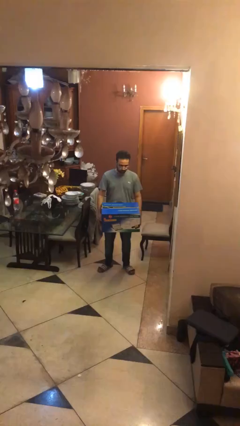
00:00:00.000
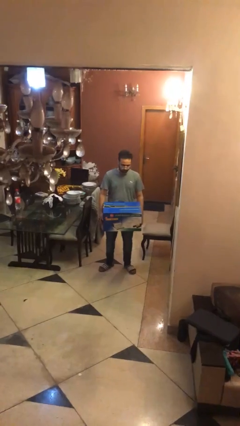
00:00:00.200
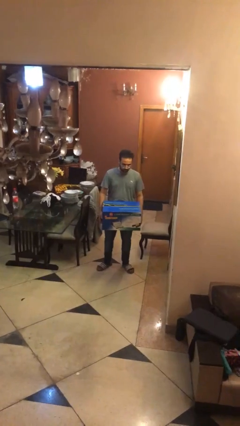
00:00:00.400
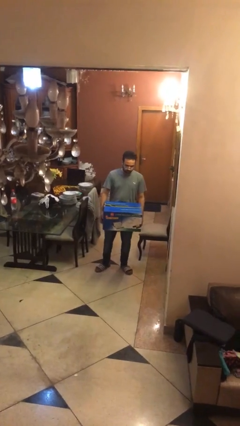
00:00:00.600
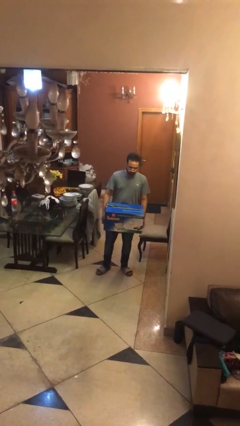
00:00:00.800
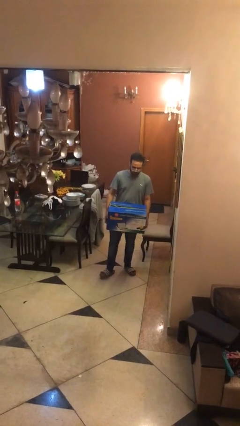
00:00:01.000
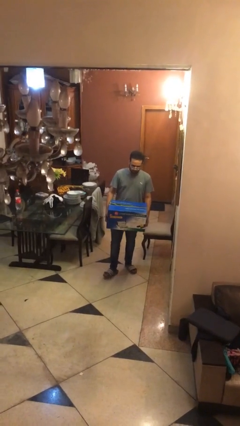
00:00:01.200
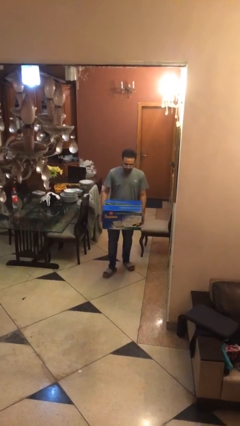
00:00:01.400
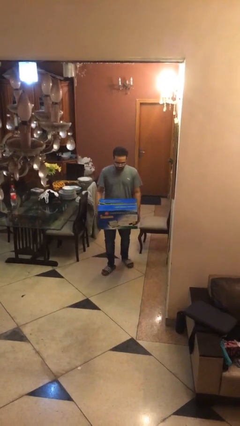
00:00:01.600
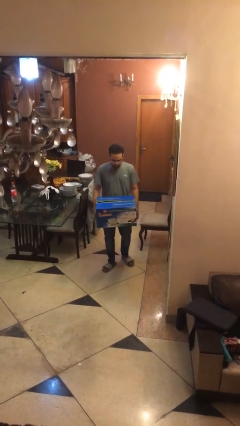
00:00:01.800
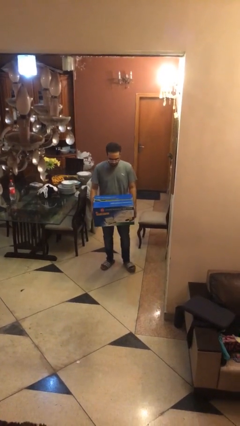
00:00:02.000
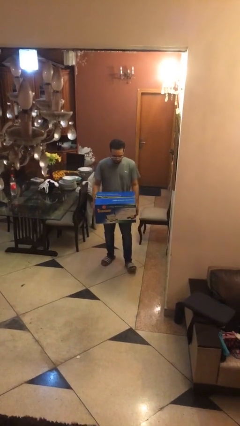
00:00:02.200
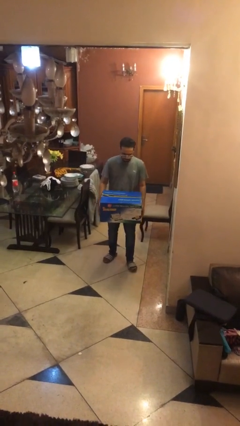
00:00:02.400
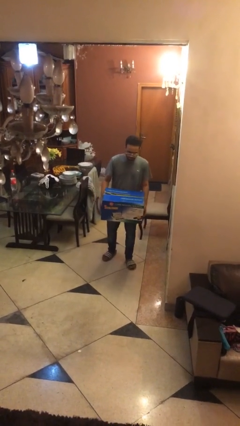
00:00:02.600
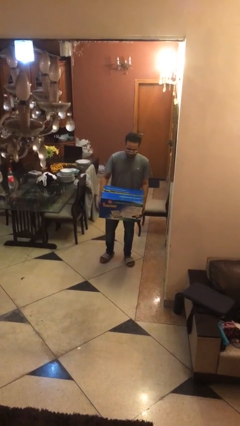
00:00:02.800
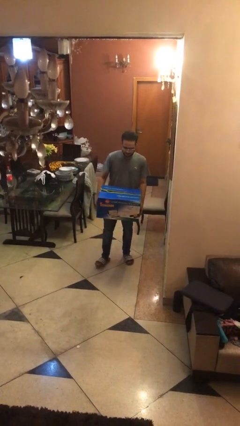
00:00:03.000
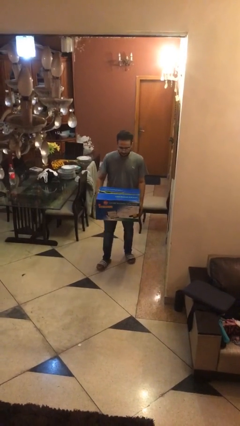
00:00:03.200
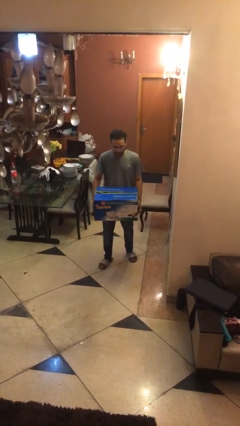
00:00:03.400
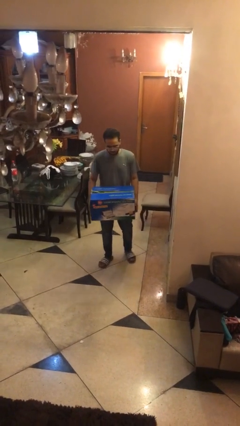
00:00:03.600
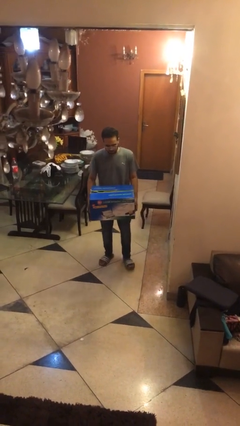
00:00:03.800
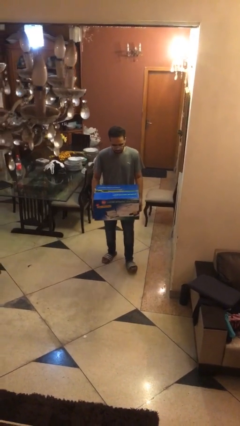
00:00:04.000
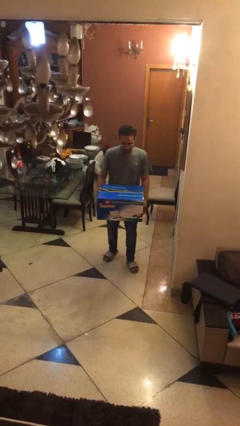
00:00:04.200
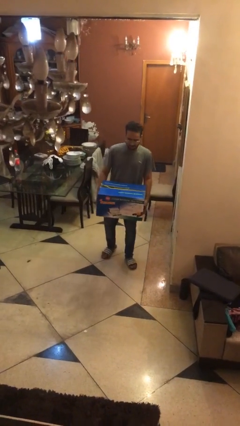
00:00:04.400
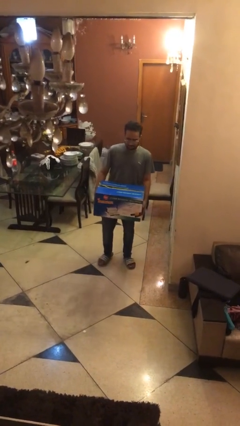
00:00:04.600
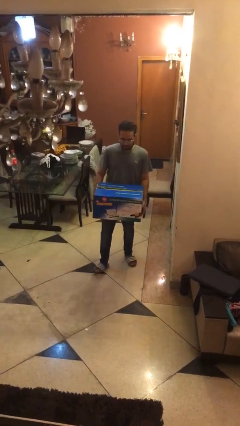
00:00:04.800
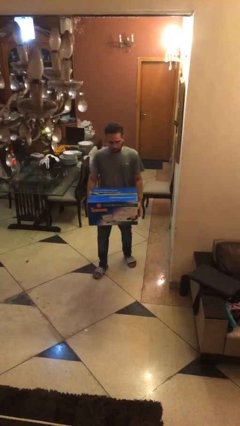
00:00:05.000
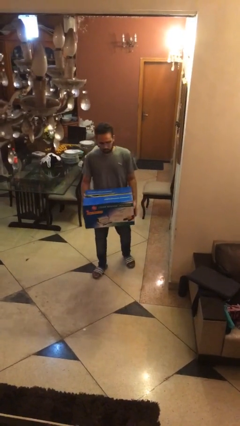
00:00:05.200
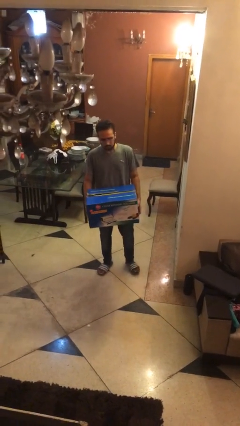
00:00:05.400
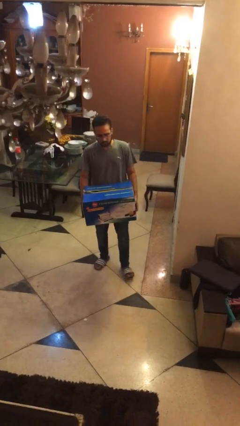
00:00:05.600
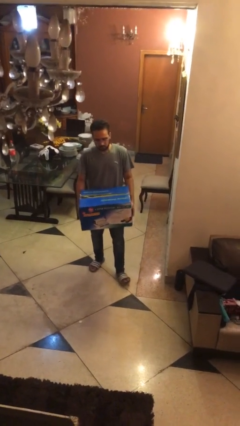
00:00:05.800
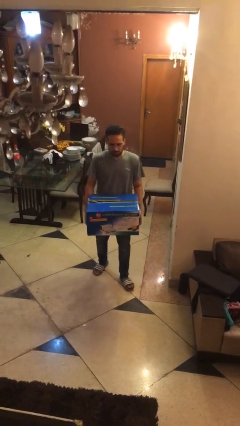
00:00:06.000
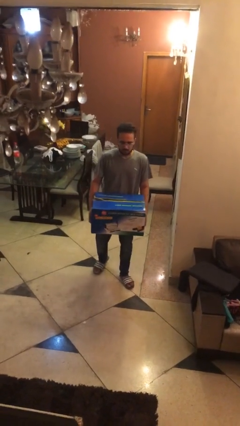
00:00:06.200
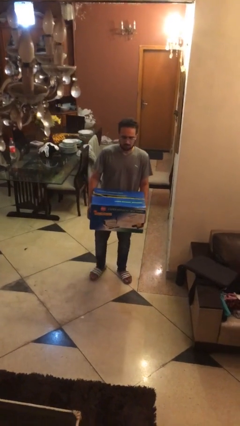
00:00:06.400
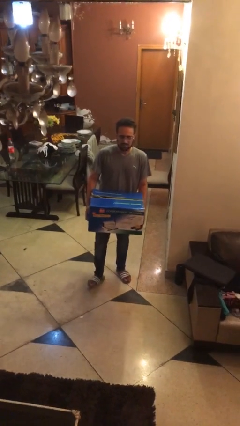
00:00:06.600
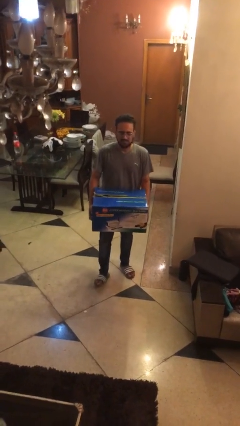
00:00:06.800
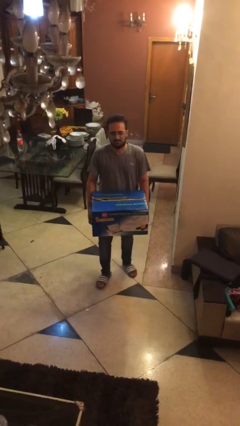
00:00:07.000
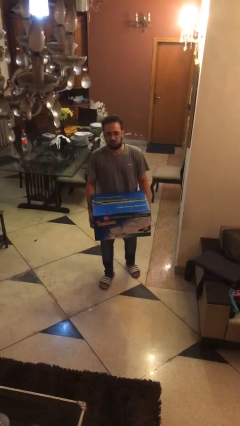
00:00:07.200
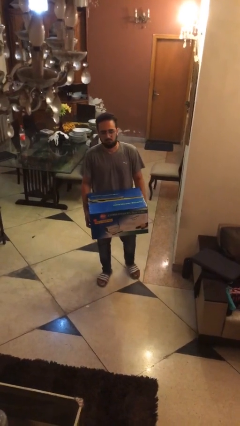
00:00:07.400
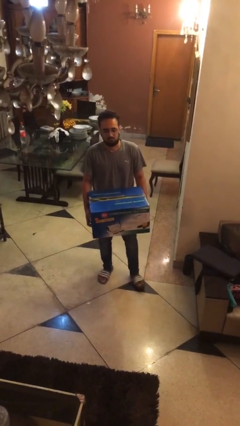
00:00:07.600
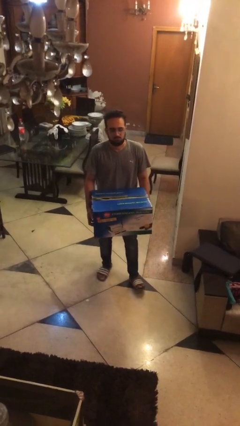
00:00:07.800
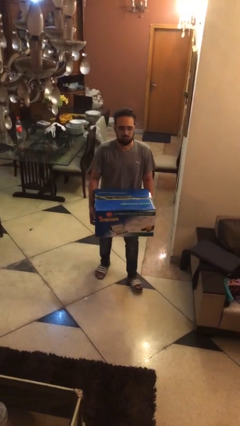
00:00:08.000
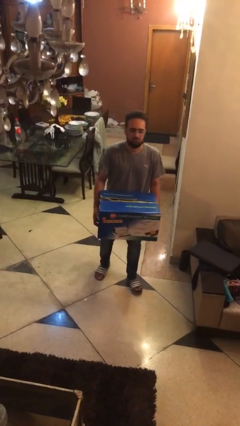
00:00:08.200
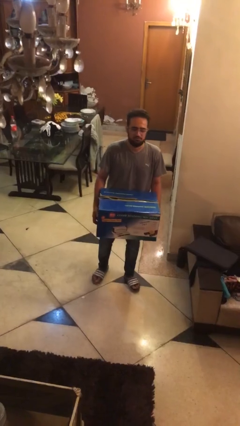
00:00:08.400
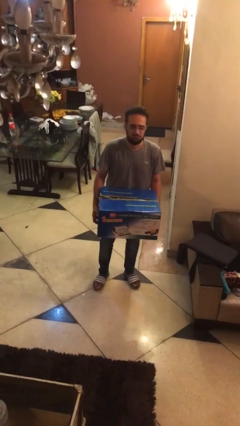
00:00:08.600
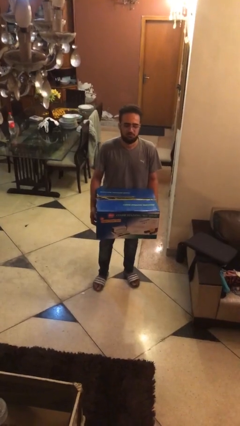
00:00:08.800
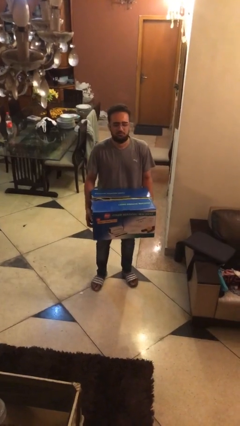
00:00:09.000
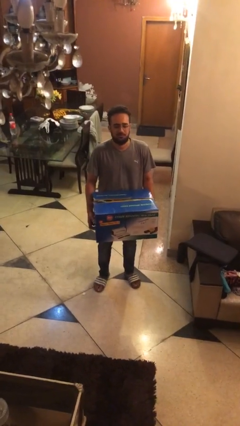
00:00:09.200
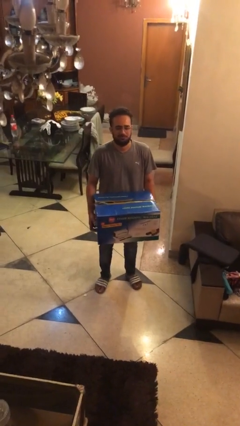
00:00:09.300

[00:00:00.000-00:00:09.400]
person carries heavy object

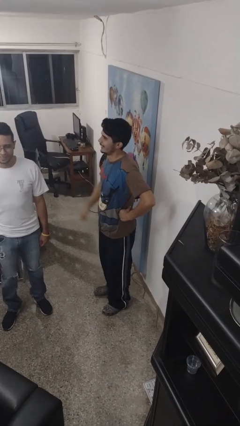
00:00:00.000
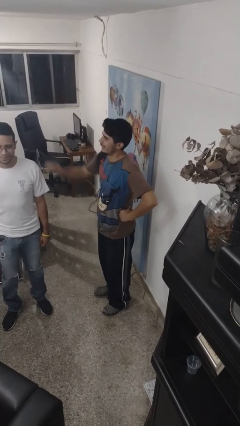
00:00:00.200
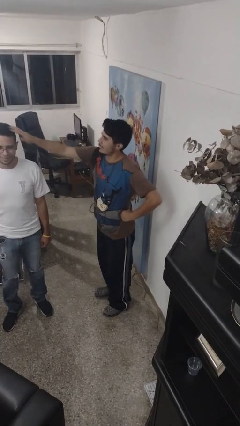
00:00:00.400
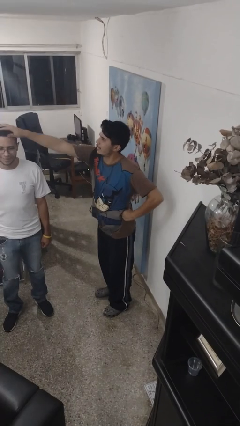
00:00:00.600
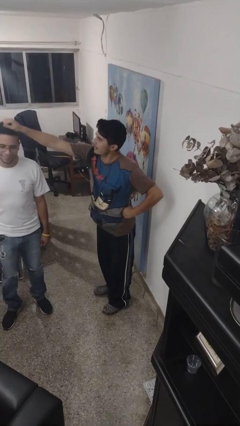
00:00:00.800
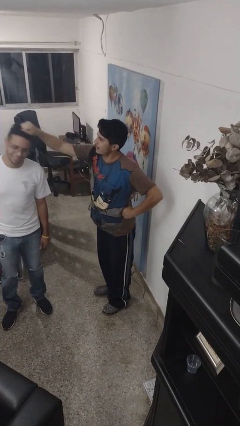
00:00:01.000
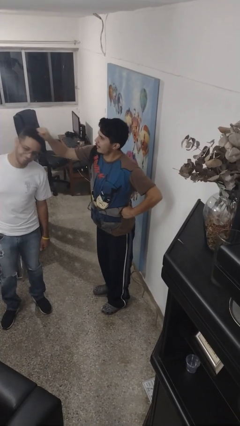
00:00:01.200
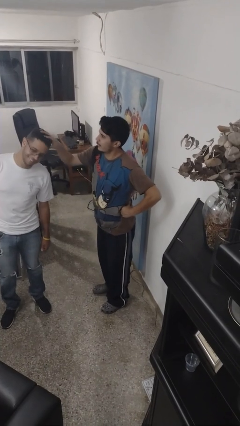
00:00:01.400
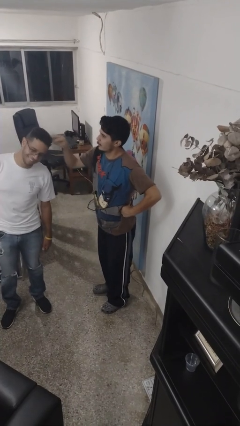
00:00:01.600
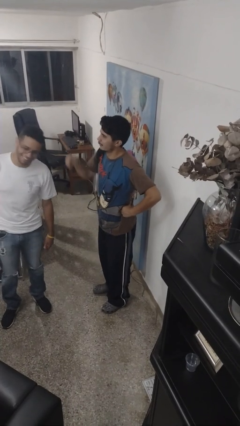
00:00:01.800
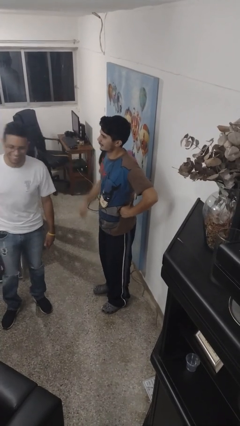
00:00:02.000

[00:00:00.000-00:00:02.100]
person grabs person by hair

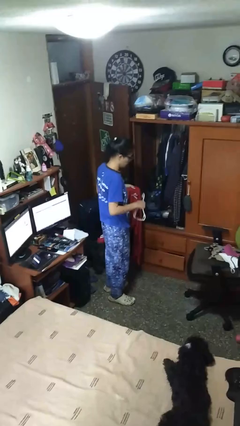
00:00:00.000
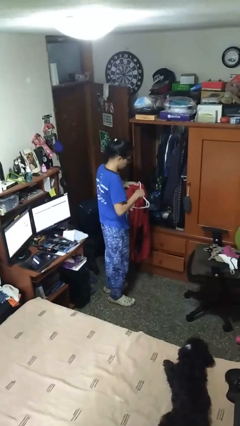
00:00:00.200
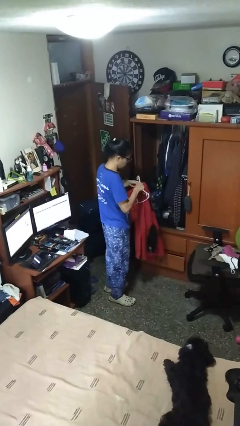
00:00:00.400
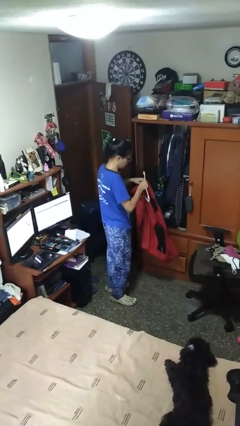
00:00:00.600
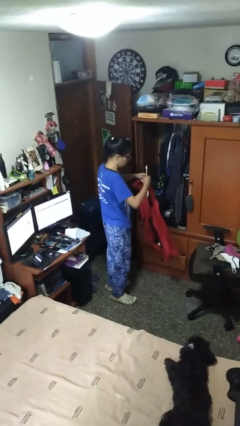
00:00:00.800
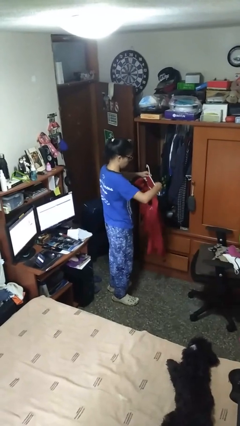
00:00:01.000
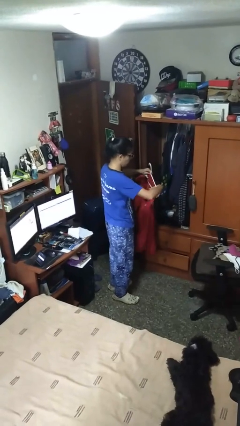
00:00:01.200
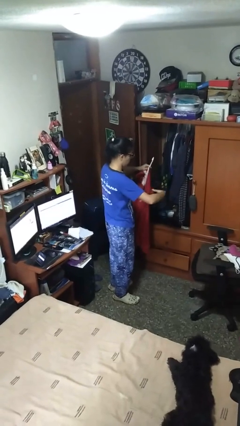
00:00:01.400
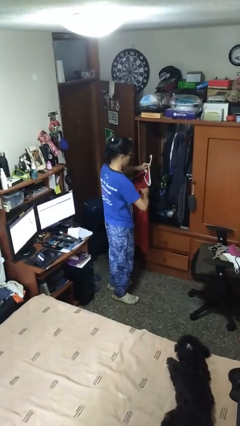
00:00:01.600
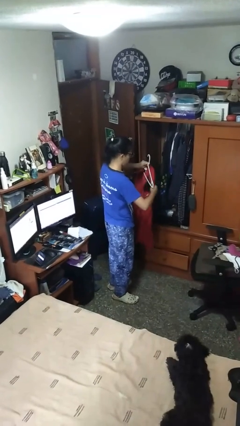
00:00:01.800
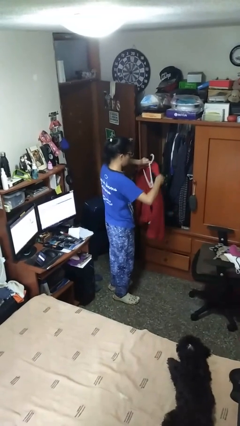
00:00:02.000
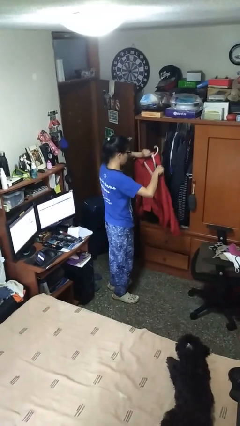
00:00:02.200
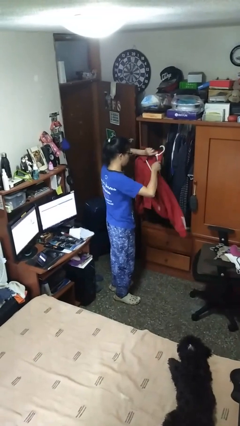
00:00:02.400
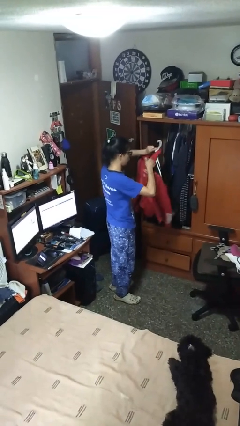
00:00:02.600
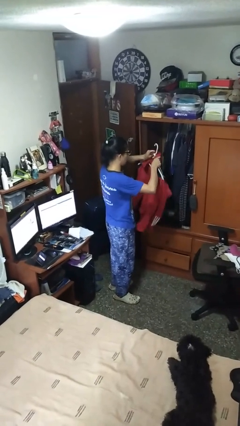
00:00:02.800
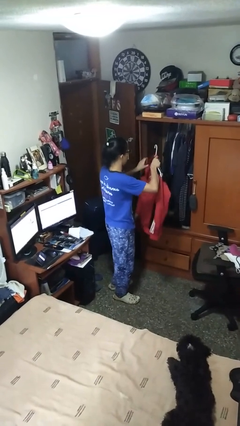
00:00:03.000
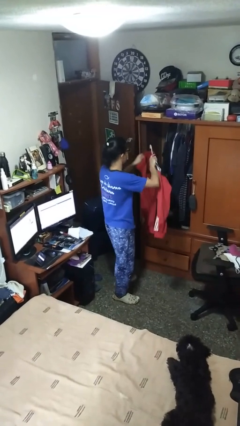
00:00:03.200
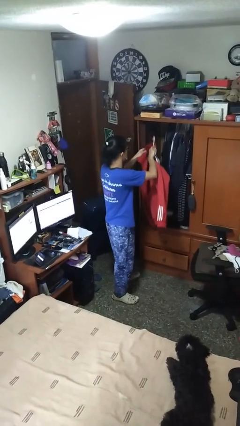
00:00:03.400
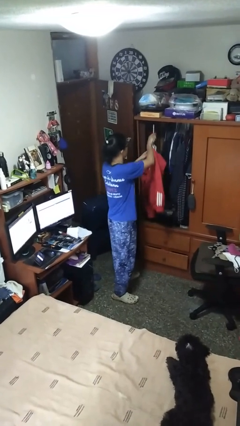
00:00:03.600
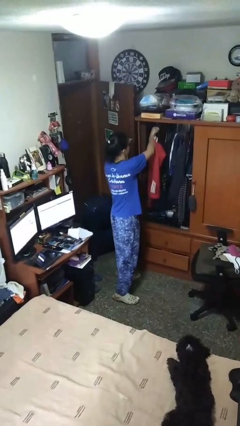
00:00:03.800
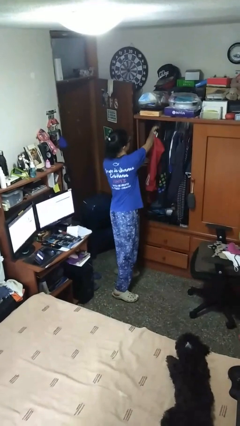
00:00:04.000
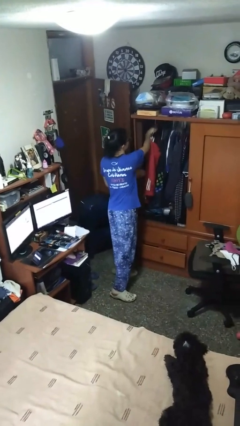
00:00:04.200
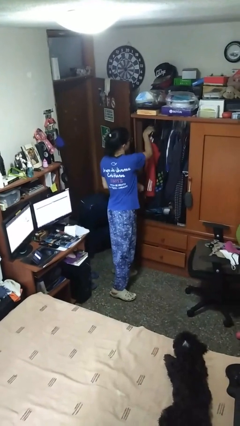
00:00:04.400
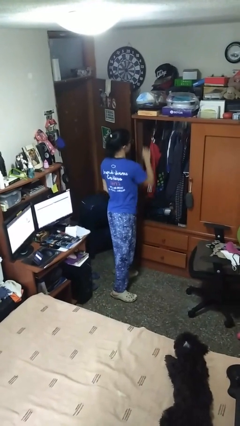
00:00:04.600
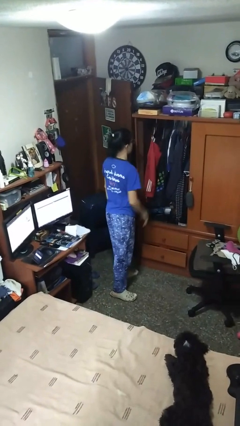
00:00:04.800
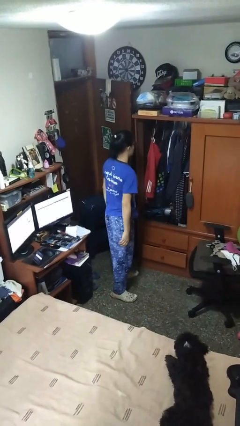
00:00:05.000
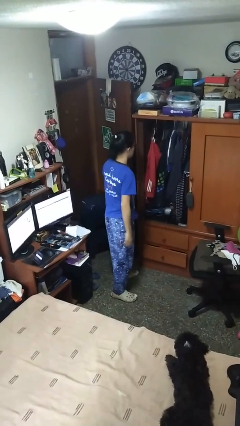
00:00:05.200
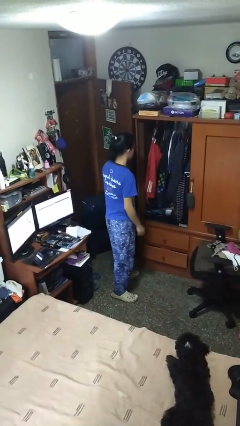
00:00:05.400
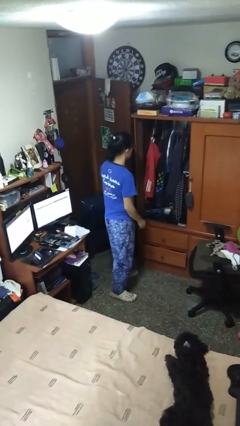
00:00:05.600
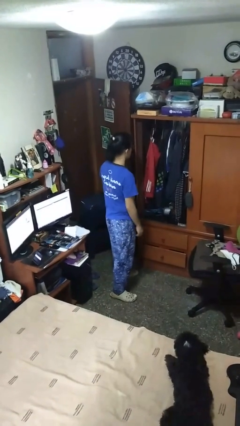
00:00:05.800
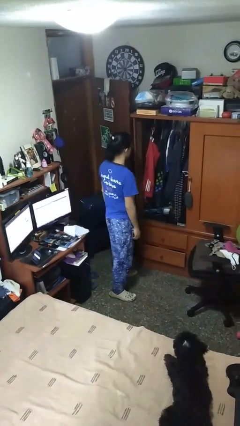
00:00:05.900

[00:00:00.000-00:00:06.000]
person puts clothes into closet

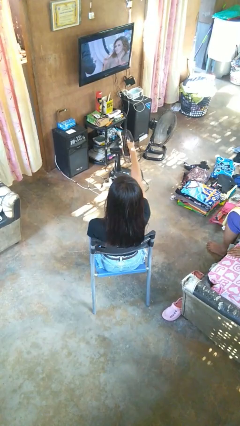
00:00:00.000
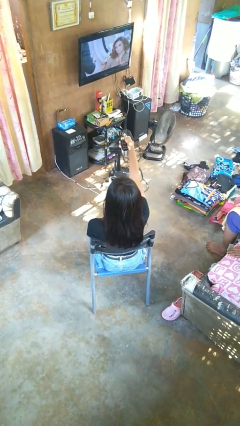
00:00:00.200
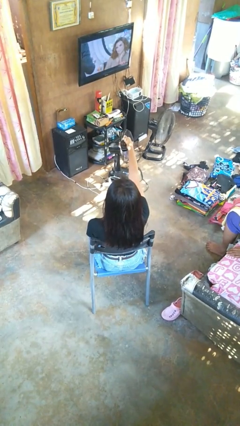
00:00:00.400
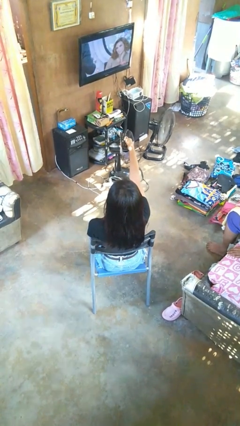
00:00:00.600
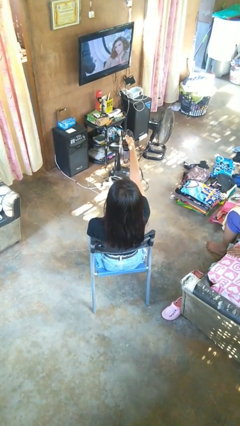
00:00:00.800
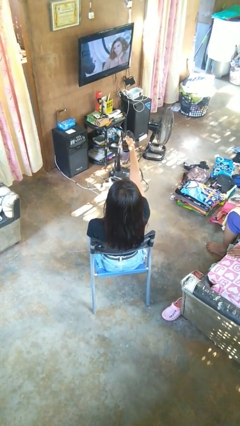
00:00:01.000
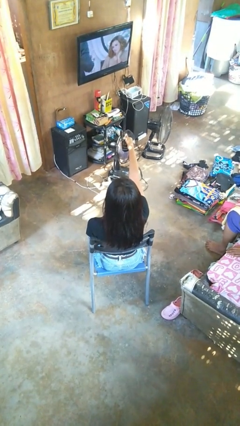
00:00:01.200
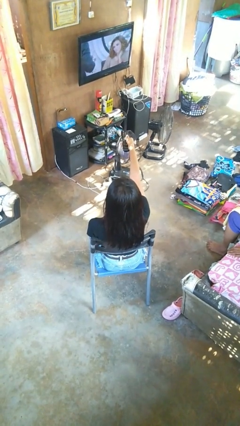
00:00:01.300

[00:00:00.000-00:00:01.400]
person uses television remote
